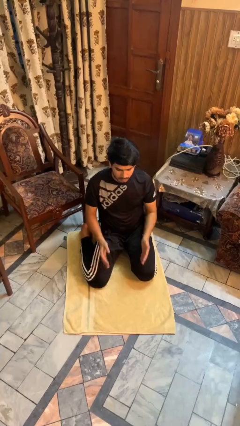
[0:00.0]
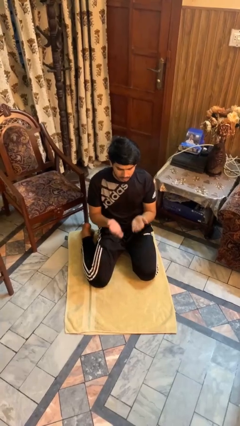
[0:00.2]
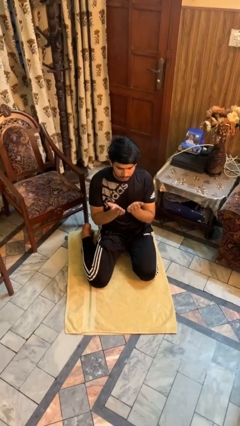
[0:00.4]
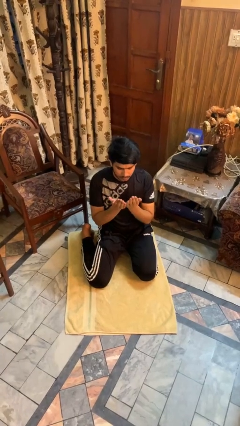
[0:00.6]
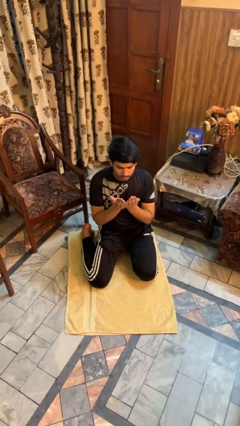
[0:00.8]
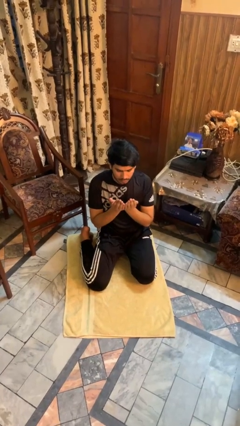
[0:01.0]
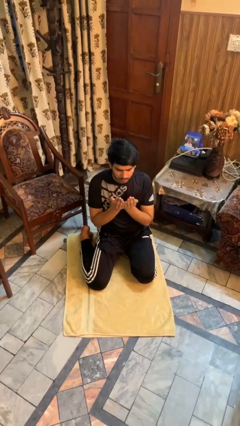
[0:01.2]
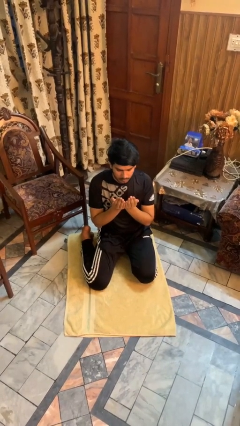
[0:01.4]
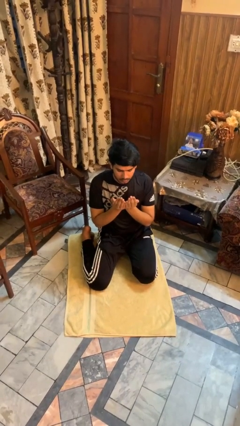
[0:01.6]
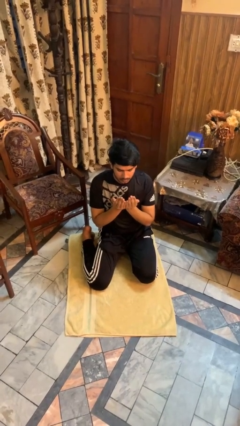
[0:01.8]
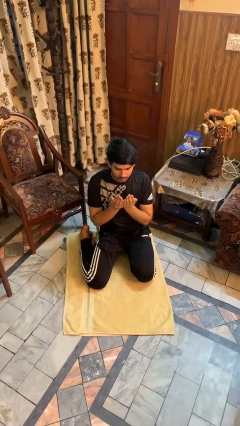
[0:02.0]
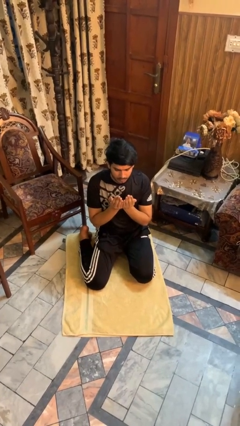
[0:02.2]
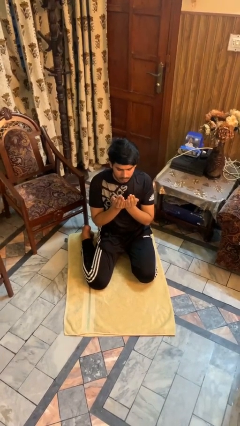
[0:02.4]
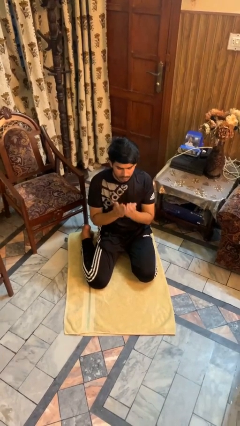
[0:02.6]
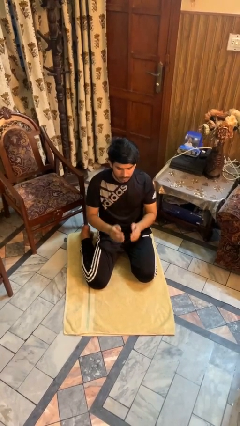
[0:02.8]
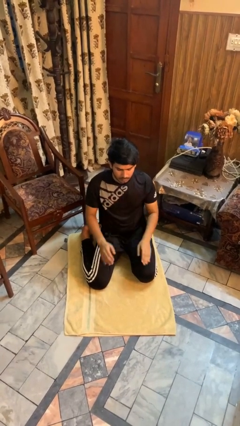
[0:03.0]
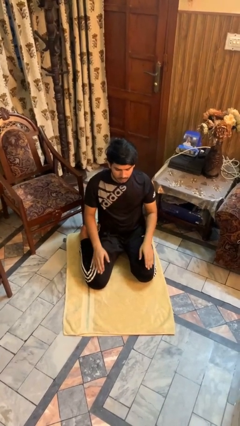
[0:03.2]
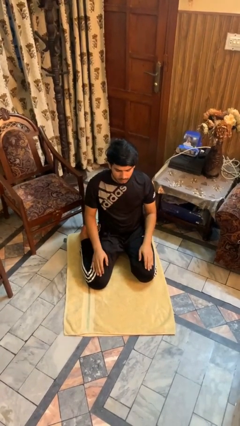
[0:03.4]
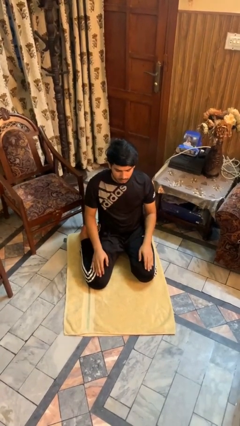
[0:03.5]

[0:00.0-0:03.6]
person prays

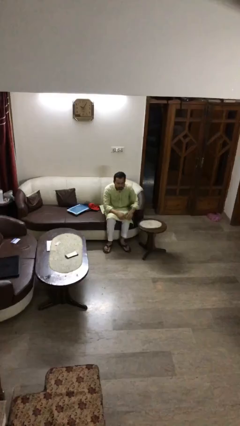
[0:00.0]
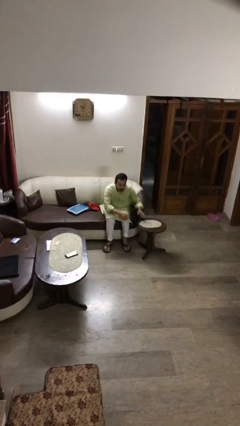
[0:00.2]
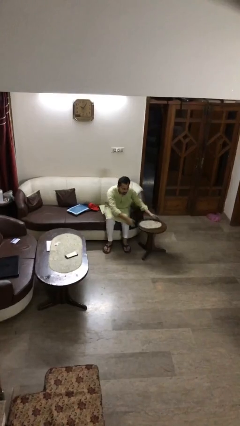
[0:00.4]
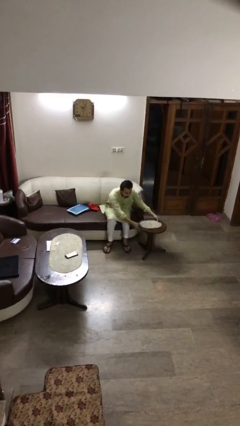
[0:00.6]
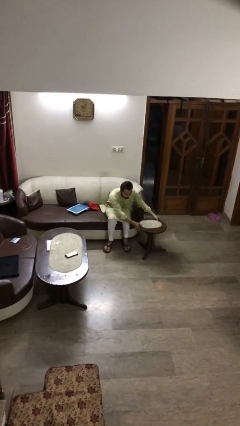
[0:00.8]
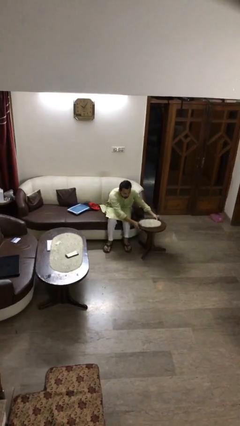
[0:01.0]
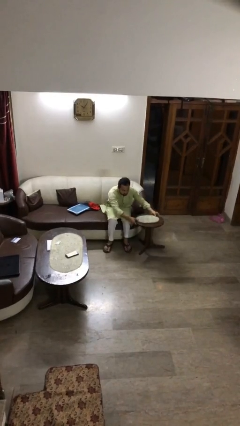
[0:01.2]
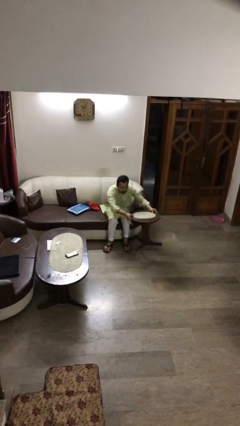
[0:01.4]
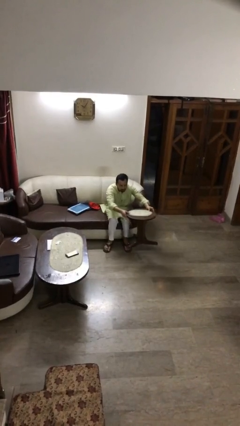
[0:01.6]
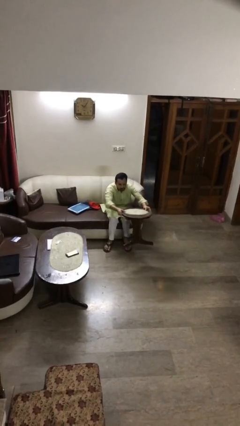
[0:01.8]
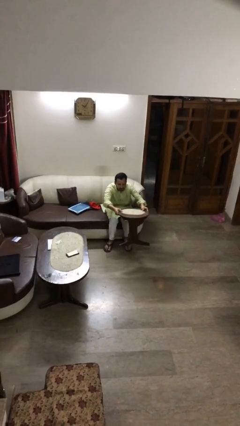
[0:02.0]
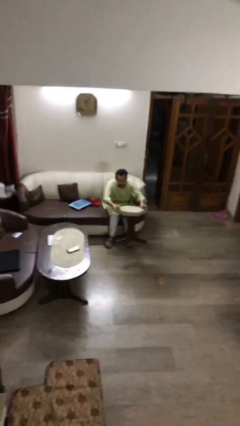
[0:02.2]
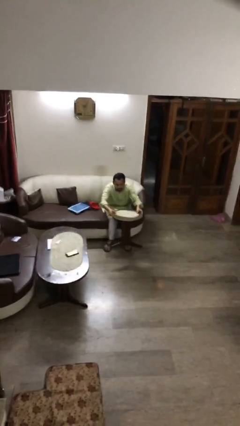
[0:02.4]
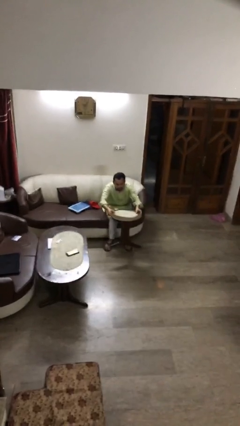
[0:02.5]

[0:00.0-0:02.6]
person picks up object from floor

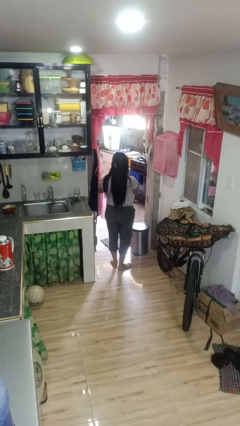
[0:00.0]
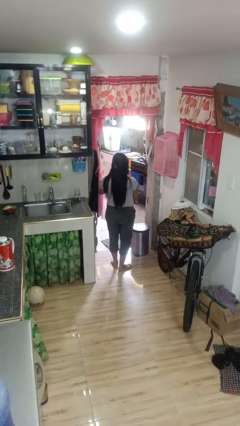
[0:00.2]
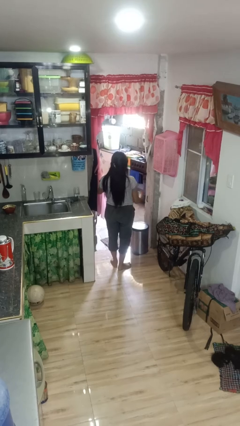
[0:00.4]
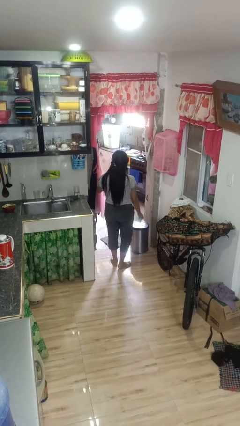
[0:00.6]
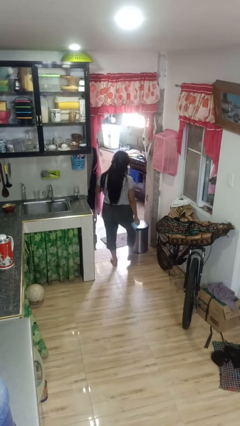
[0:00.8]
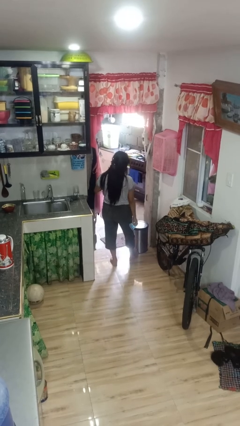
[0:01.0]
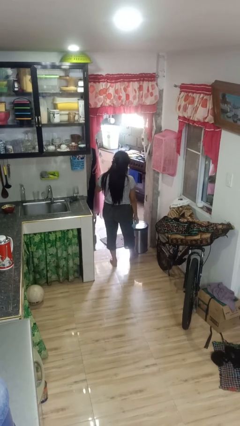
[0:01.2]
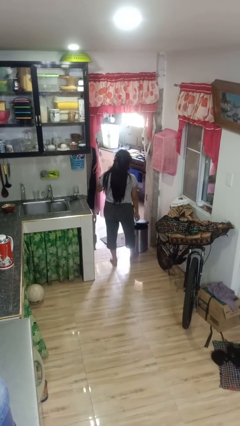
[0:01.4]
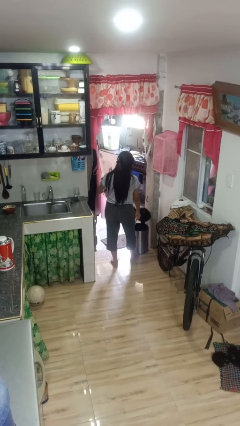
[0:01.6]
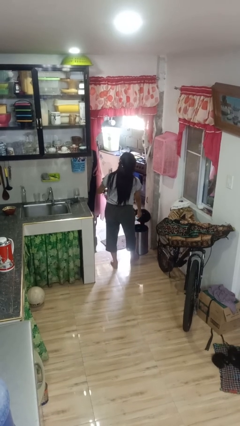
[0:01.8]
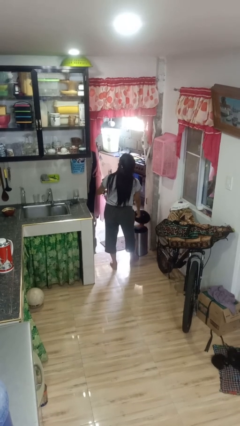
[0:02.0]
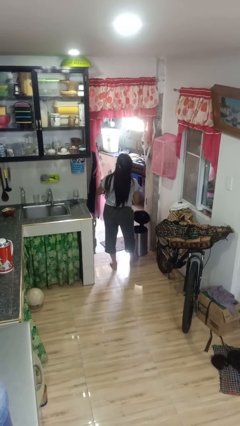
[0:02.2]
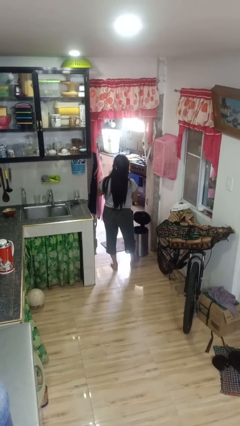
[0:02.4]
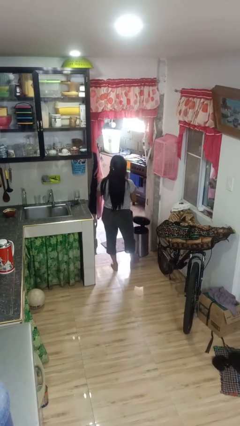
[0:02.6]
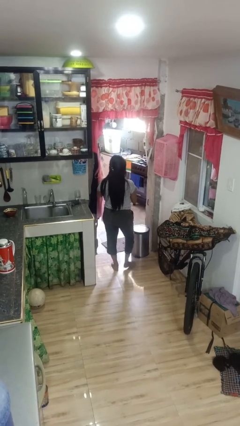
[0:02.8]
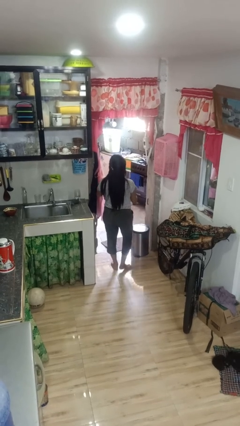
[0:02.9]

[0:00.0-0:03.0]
person discards trash

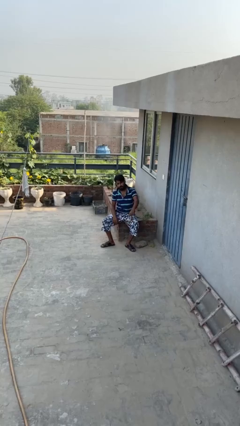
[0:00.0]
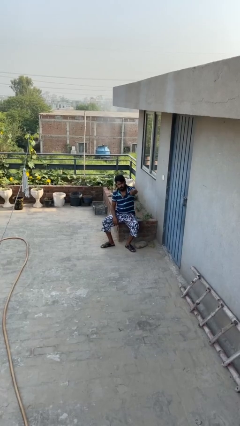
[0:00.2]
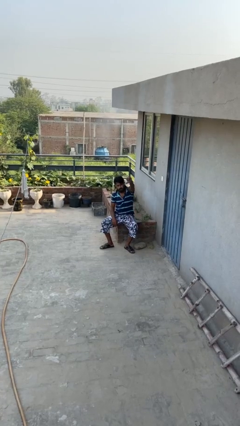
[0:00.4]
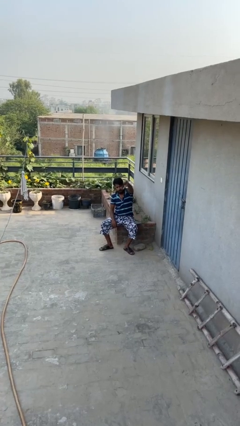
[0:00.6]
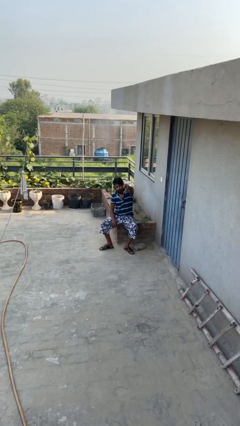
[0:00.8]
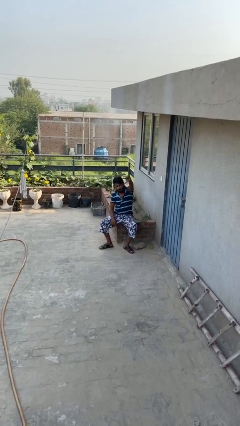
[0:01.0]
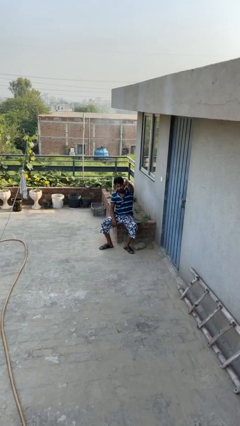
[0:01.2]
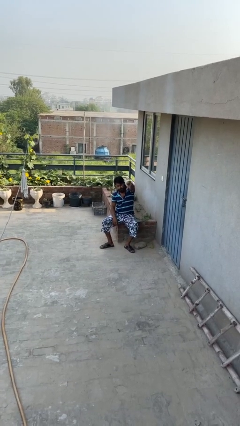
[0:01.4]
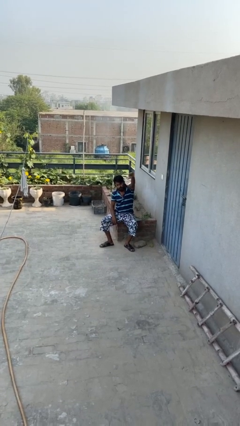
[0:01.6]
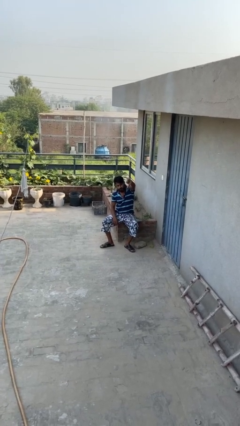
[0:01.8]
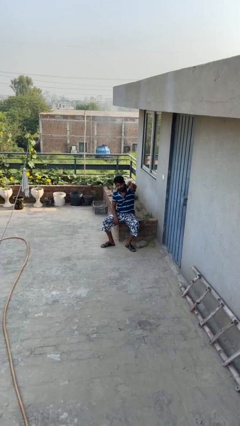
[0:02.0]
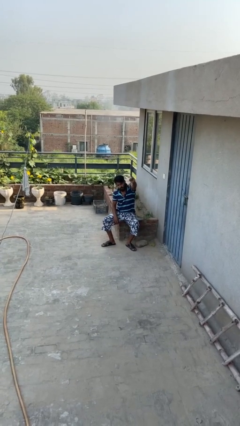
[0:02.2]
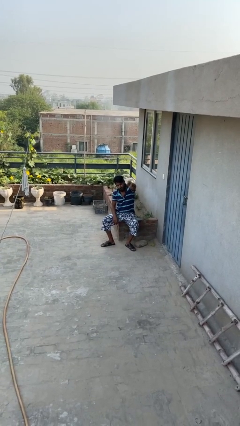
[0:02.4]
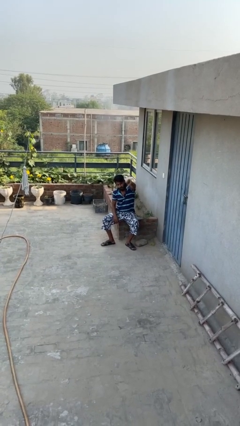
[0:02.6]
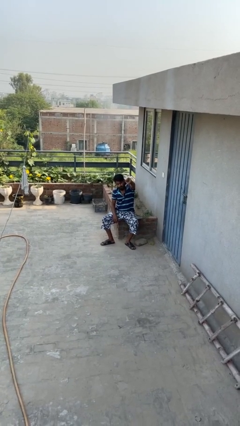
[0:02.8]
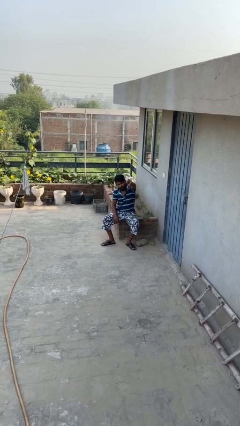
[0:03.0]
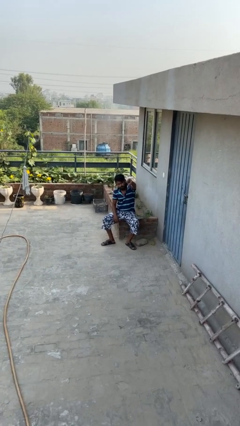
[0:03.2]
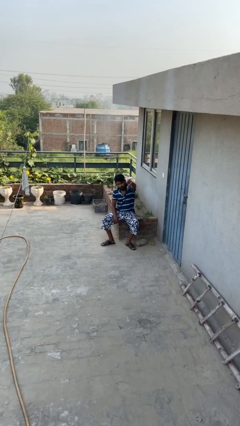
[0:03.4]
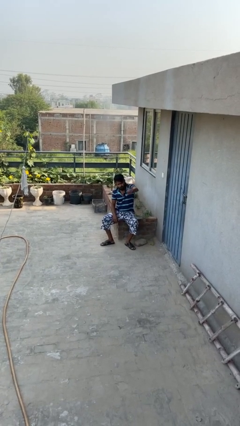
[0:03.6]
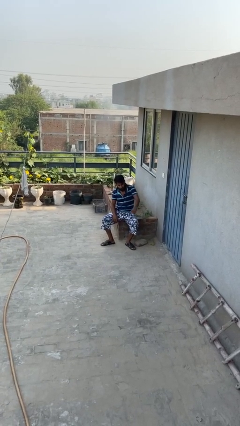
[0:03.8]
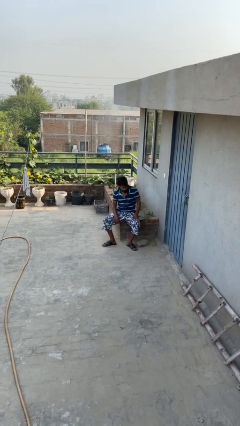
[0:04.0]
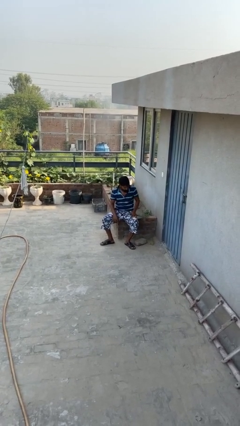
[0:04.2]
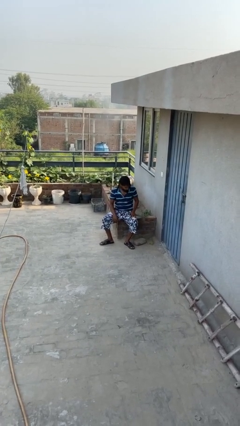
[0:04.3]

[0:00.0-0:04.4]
person gestures thumbs down

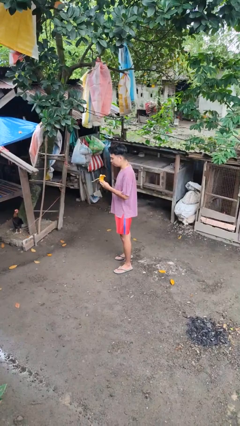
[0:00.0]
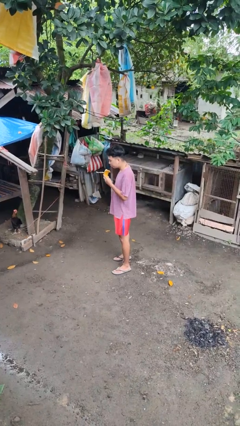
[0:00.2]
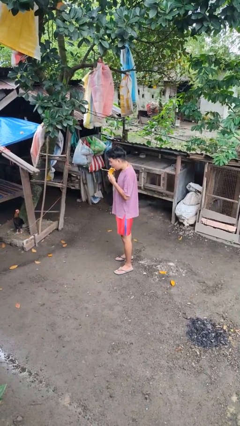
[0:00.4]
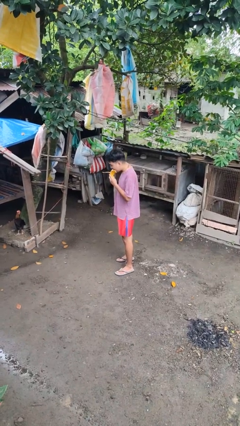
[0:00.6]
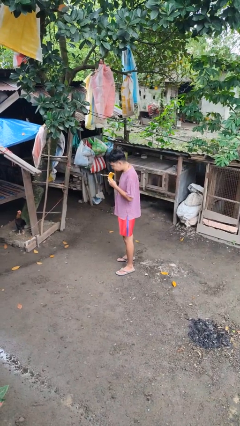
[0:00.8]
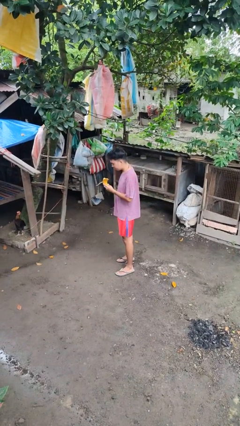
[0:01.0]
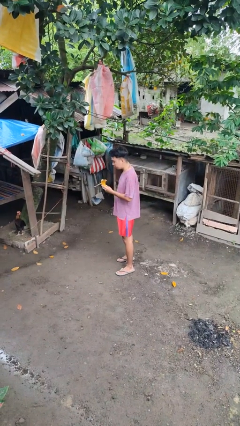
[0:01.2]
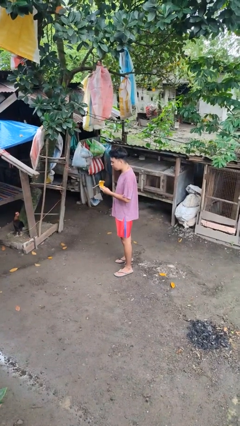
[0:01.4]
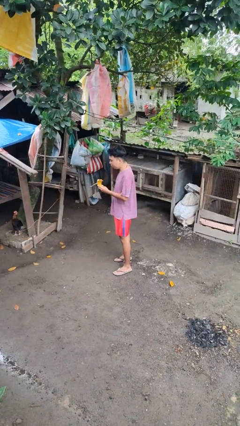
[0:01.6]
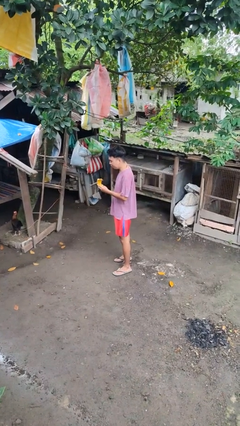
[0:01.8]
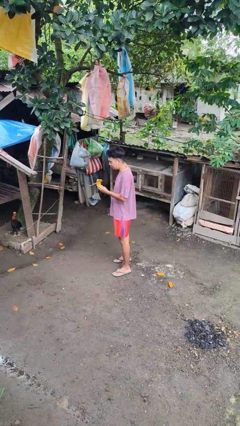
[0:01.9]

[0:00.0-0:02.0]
person eats banana

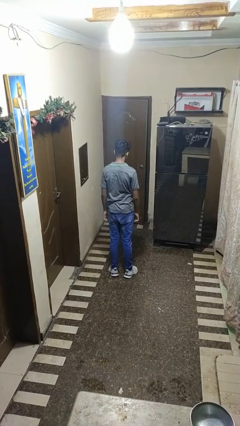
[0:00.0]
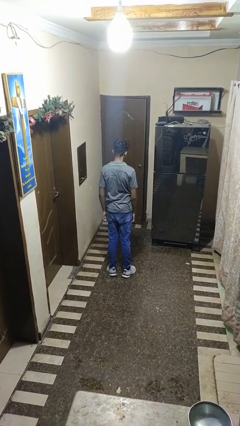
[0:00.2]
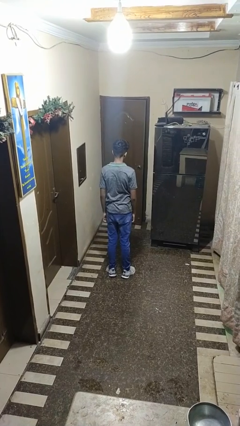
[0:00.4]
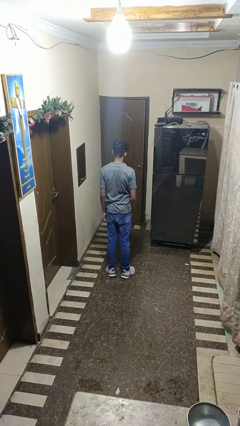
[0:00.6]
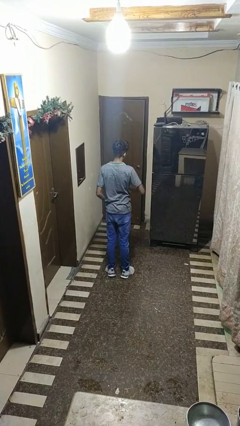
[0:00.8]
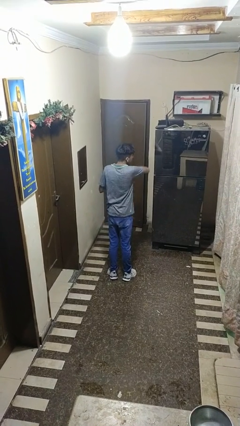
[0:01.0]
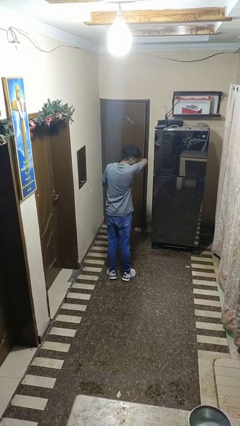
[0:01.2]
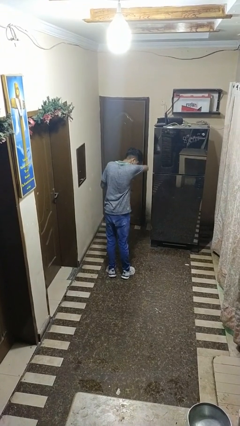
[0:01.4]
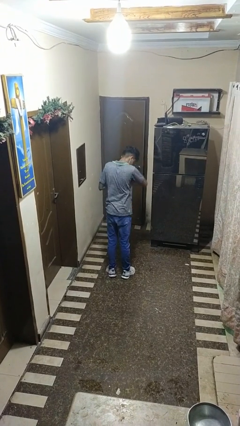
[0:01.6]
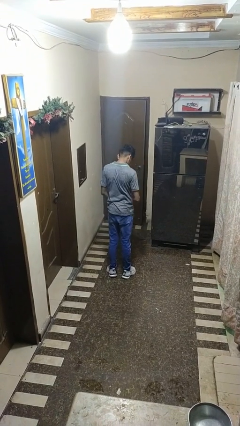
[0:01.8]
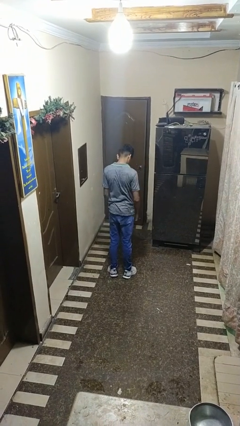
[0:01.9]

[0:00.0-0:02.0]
person sneezes into arm

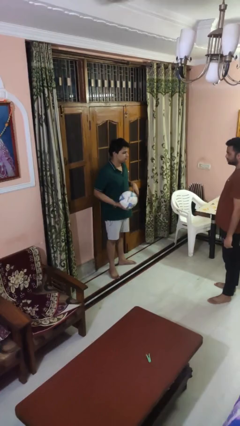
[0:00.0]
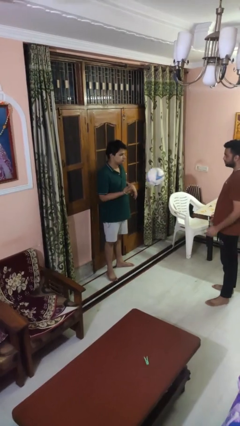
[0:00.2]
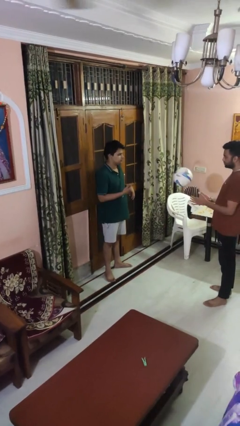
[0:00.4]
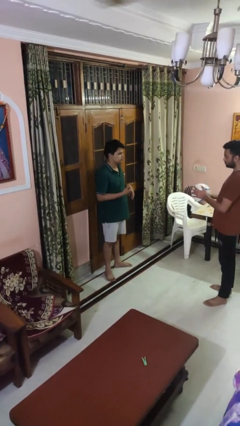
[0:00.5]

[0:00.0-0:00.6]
person throws object to person
